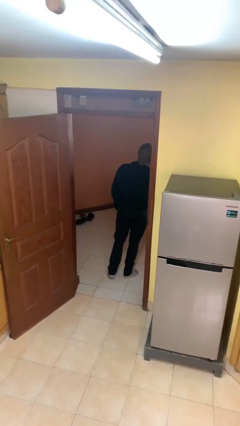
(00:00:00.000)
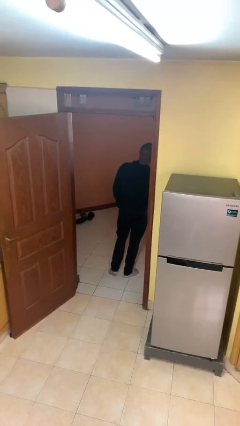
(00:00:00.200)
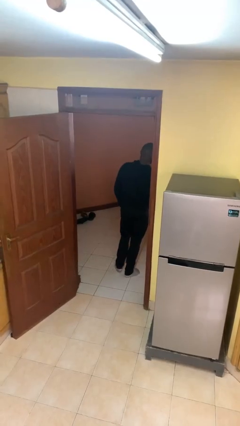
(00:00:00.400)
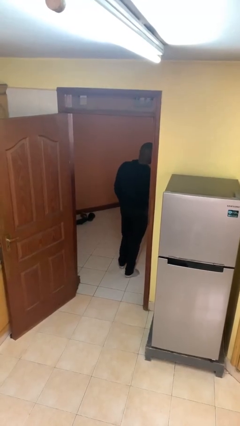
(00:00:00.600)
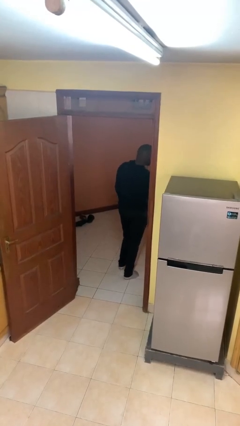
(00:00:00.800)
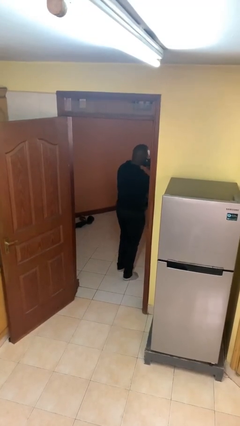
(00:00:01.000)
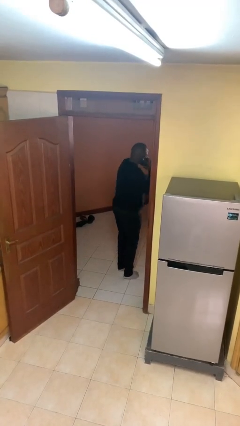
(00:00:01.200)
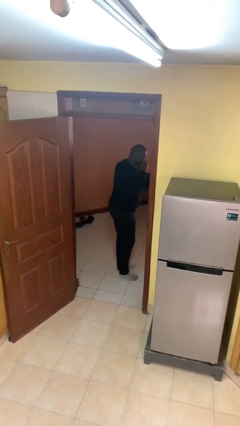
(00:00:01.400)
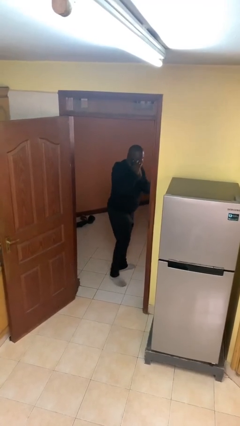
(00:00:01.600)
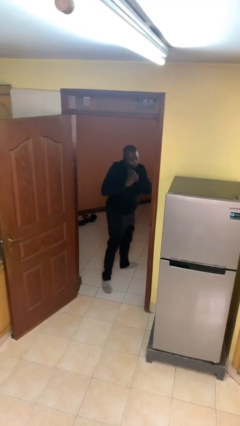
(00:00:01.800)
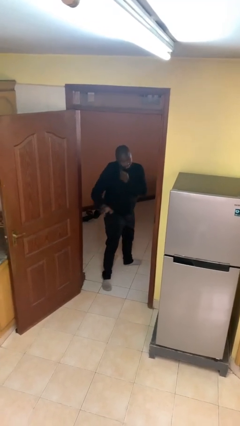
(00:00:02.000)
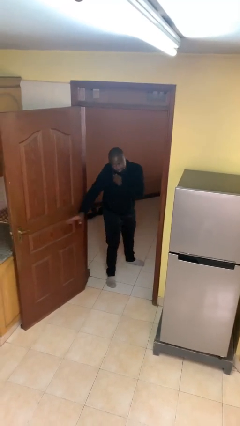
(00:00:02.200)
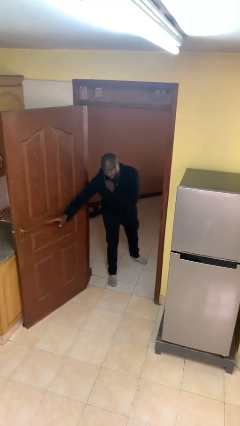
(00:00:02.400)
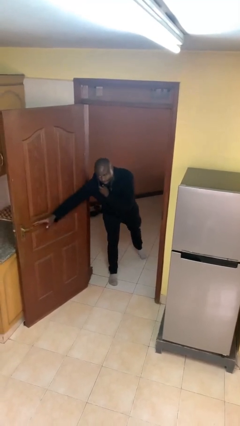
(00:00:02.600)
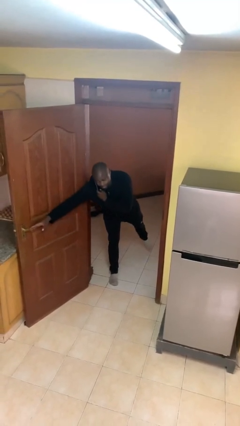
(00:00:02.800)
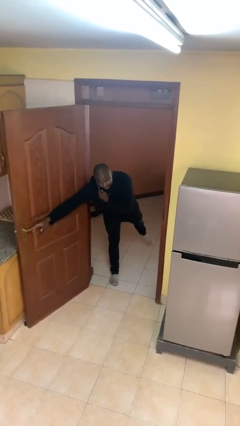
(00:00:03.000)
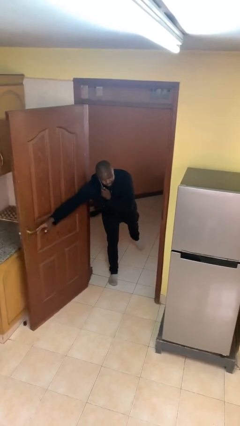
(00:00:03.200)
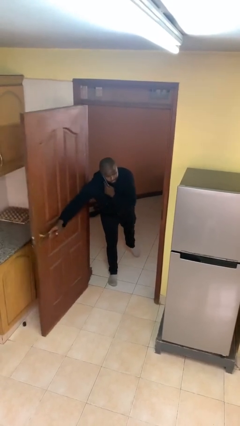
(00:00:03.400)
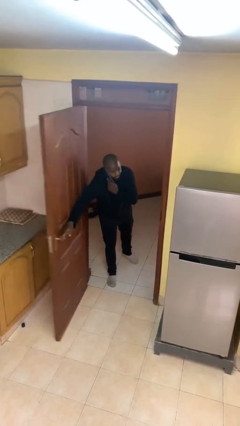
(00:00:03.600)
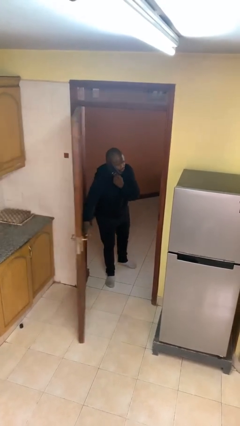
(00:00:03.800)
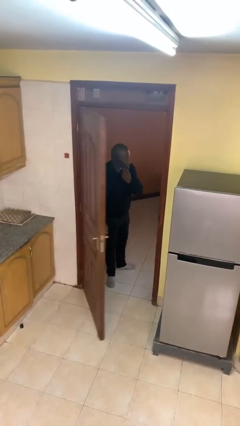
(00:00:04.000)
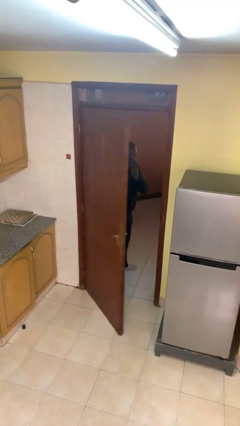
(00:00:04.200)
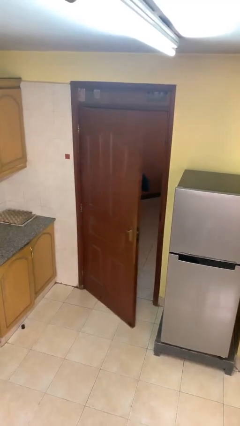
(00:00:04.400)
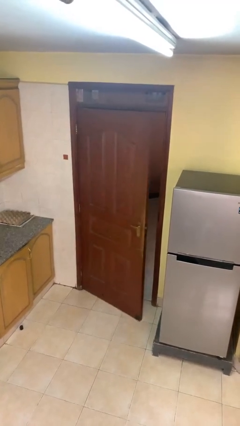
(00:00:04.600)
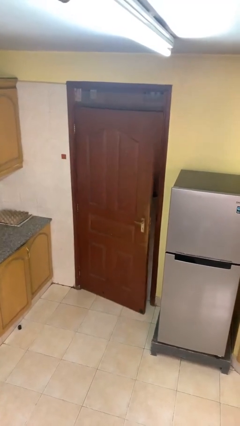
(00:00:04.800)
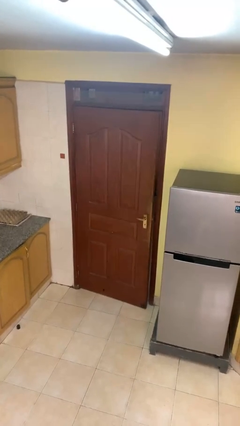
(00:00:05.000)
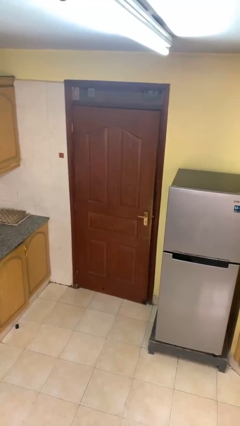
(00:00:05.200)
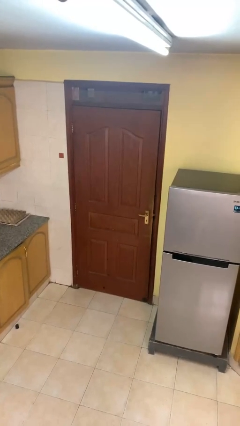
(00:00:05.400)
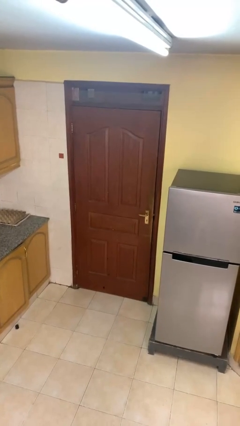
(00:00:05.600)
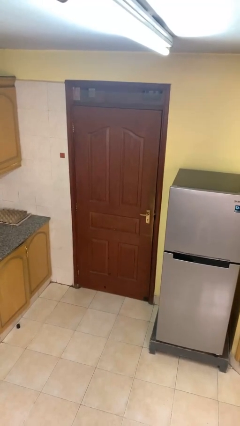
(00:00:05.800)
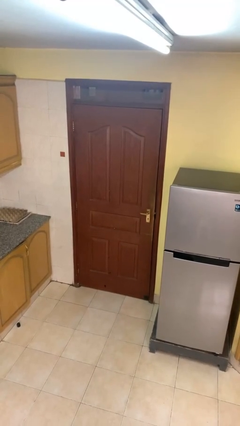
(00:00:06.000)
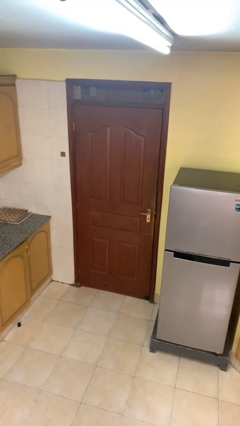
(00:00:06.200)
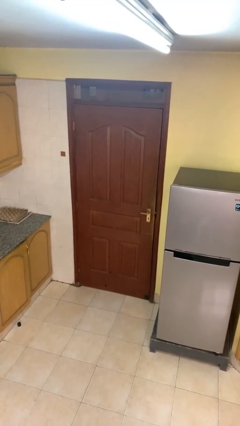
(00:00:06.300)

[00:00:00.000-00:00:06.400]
person closes facility door

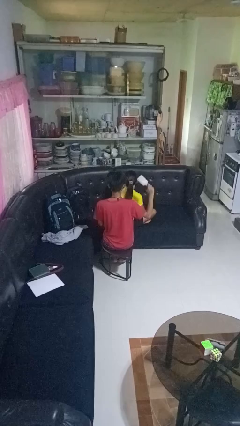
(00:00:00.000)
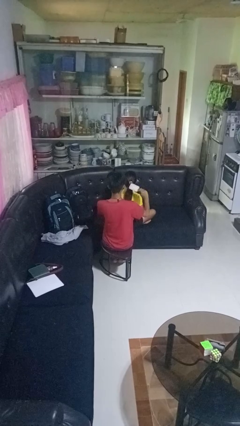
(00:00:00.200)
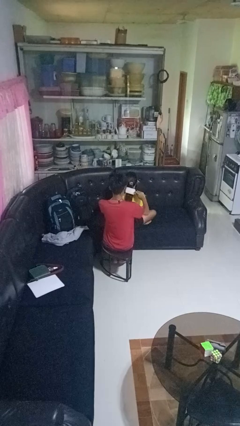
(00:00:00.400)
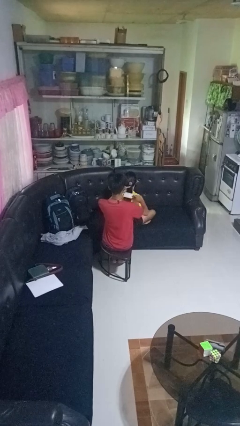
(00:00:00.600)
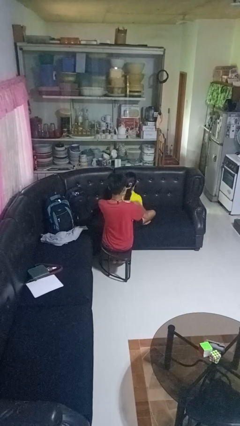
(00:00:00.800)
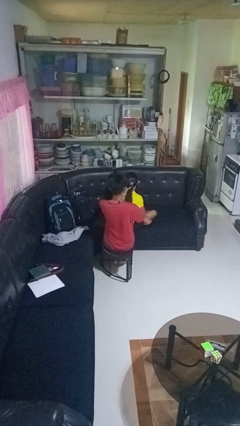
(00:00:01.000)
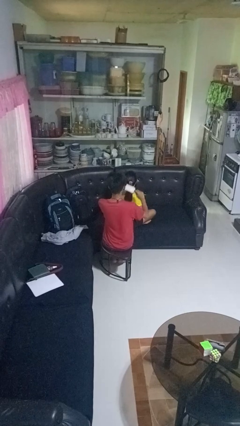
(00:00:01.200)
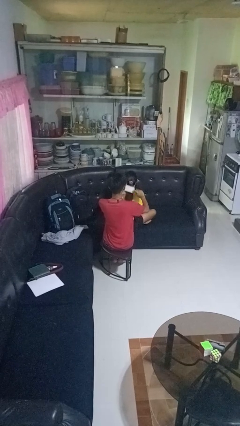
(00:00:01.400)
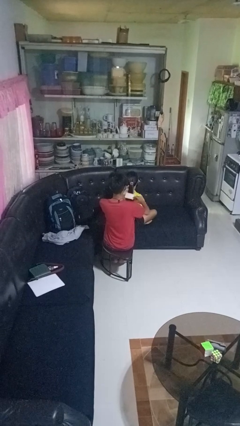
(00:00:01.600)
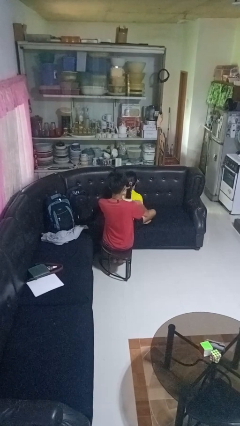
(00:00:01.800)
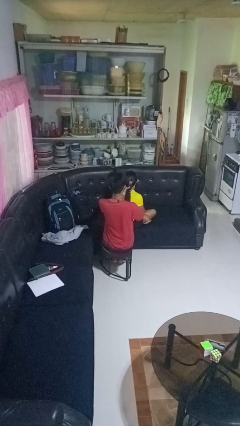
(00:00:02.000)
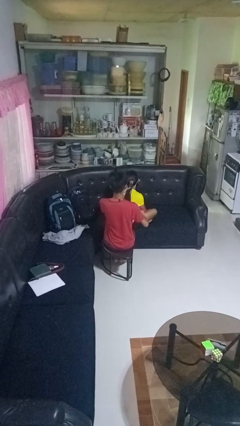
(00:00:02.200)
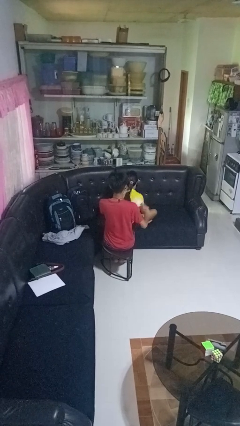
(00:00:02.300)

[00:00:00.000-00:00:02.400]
person brushes hair of person

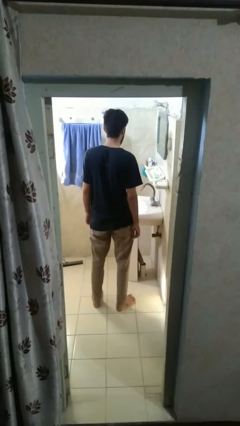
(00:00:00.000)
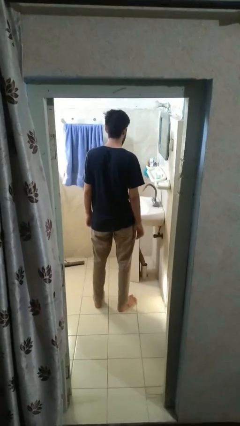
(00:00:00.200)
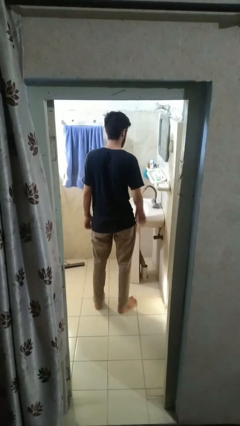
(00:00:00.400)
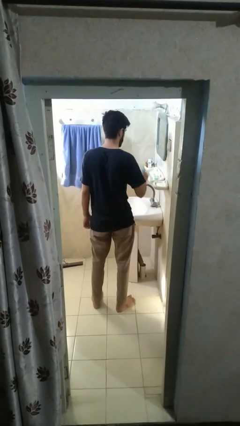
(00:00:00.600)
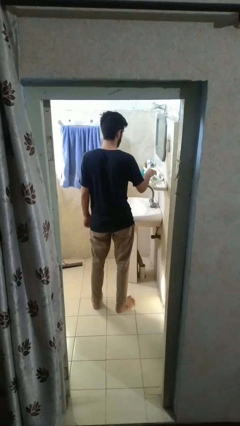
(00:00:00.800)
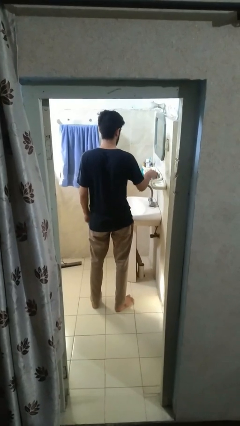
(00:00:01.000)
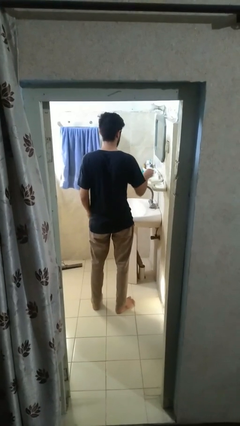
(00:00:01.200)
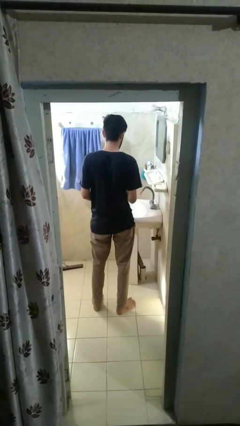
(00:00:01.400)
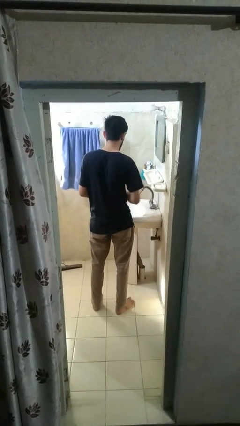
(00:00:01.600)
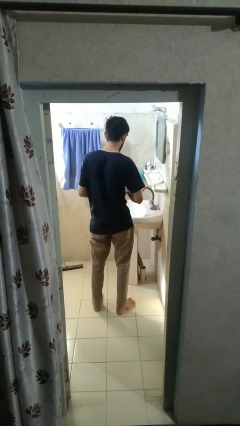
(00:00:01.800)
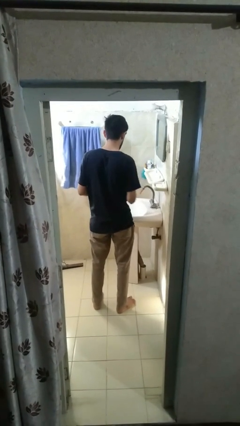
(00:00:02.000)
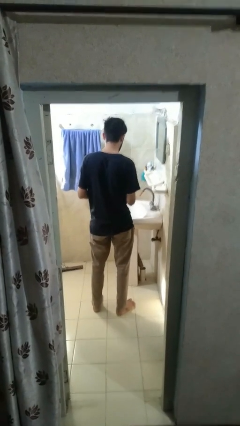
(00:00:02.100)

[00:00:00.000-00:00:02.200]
person picks up object from countertop

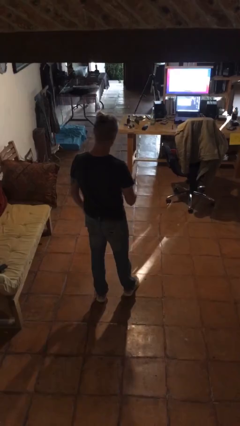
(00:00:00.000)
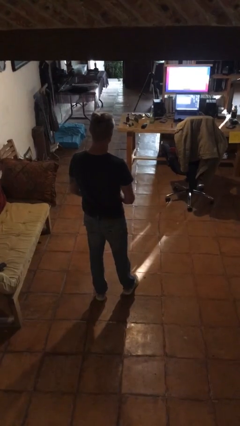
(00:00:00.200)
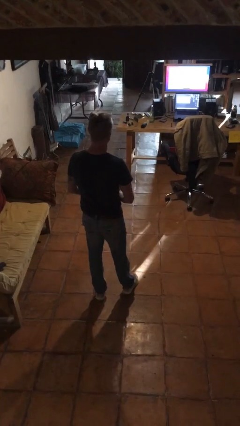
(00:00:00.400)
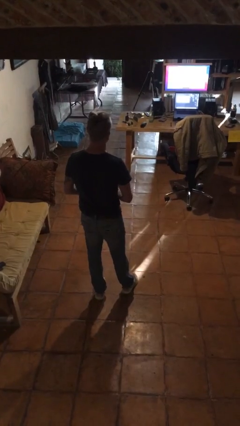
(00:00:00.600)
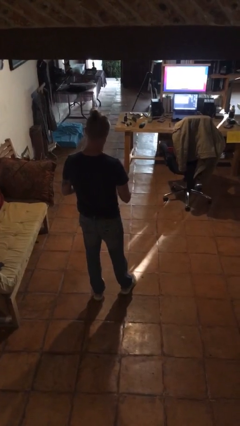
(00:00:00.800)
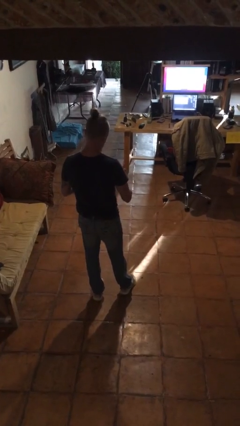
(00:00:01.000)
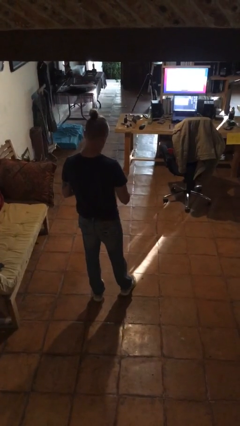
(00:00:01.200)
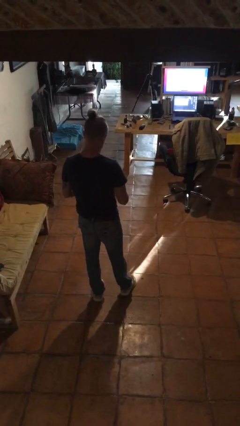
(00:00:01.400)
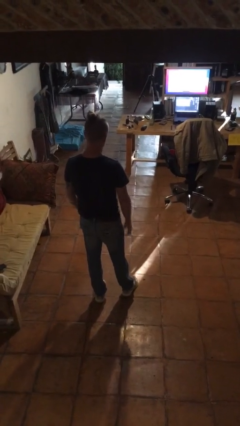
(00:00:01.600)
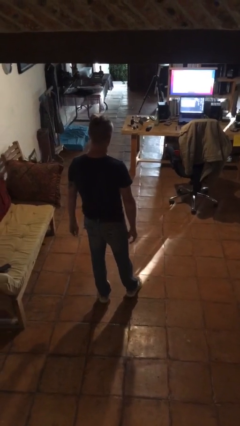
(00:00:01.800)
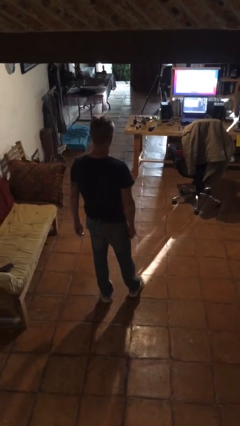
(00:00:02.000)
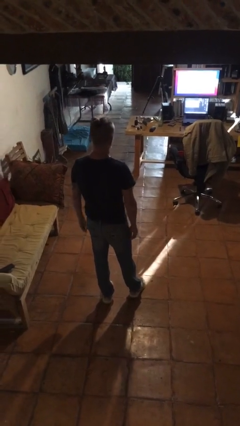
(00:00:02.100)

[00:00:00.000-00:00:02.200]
person takes off ring

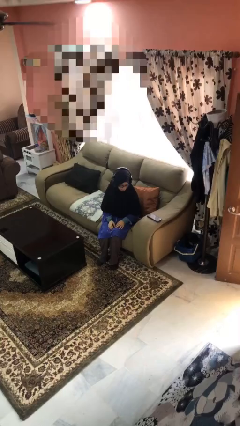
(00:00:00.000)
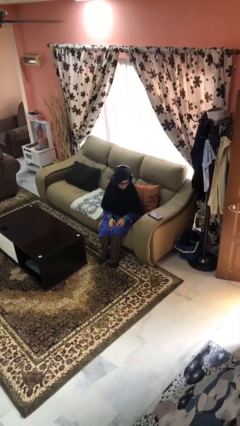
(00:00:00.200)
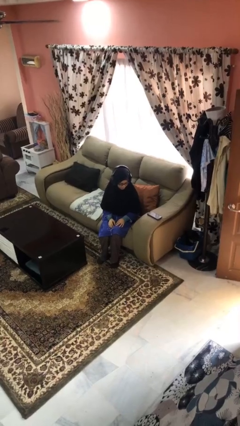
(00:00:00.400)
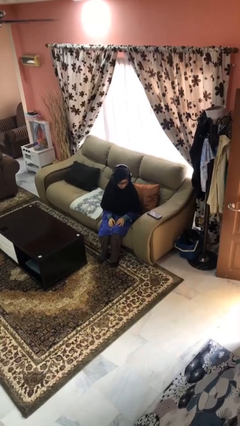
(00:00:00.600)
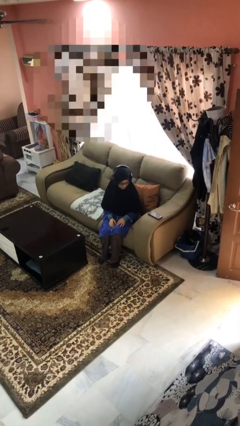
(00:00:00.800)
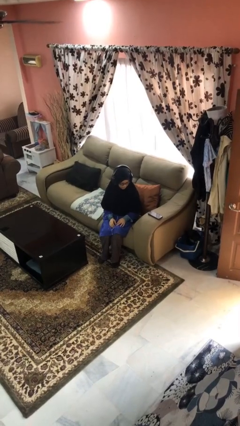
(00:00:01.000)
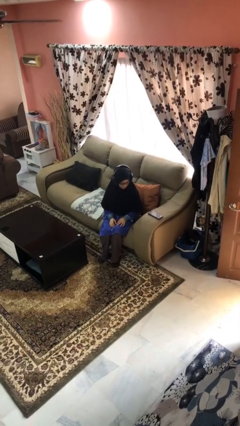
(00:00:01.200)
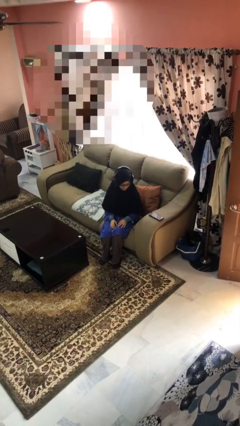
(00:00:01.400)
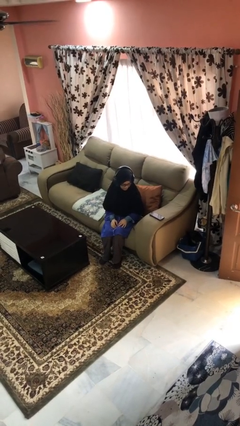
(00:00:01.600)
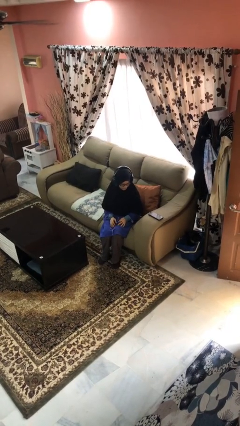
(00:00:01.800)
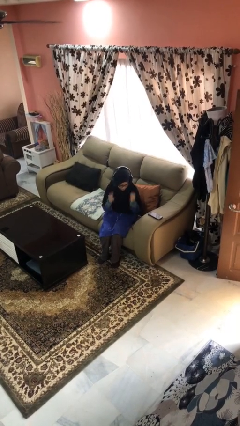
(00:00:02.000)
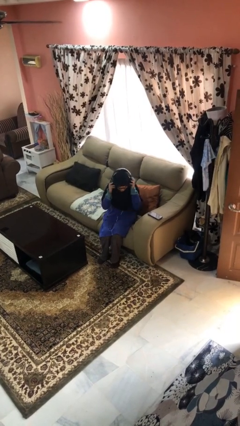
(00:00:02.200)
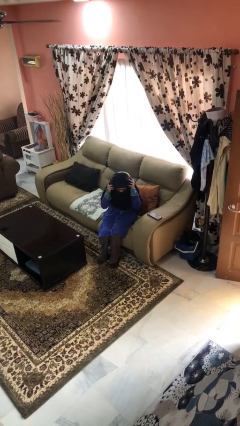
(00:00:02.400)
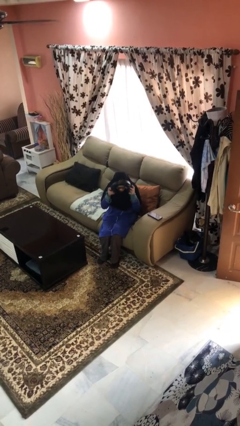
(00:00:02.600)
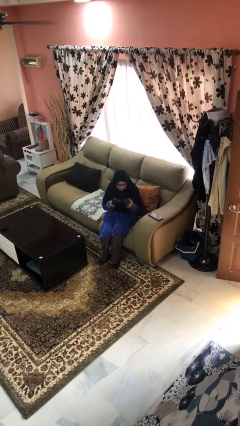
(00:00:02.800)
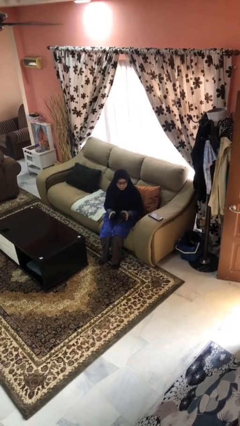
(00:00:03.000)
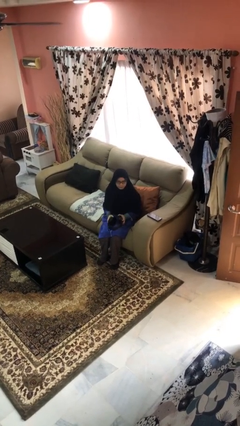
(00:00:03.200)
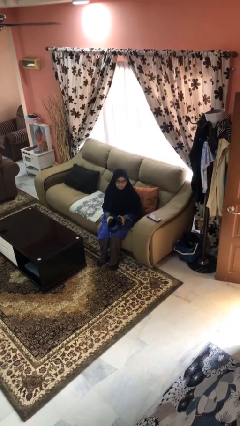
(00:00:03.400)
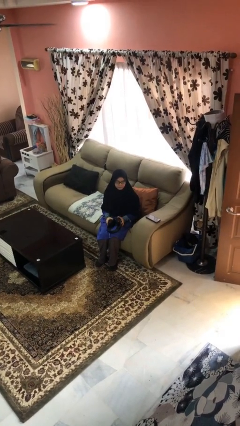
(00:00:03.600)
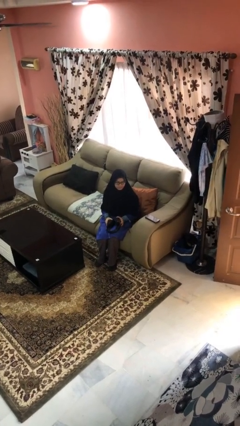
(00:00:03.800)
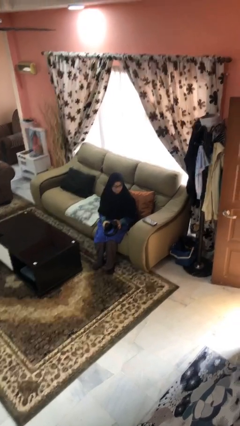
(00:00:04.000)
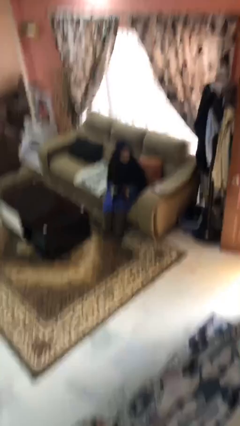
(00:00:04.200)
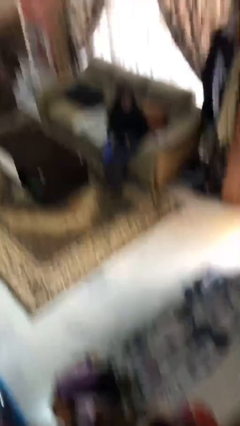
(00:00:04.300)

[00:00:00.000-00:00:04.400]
person takes off headphones
